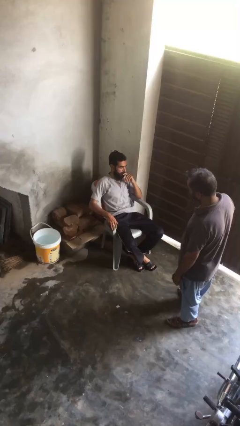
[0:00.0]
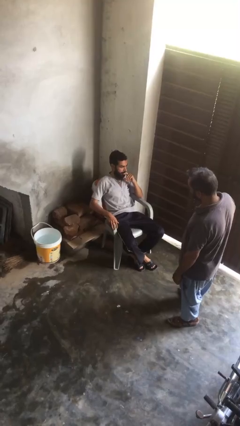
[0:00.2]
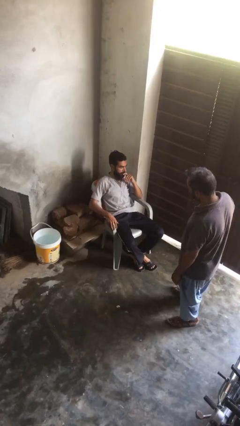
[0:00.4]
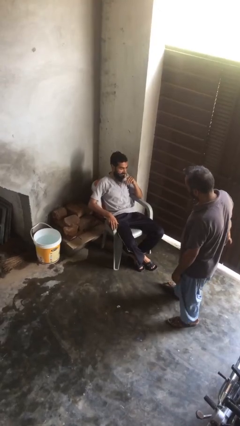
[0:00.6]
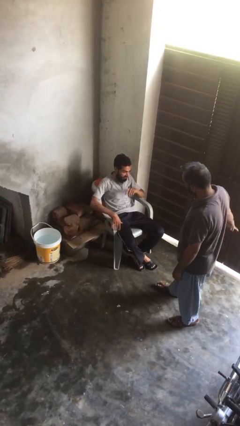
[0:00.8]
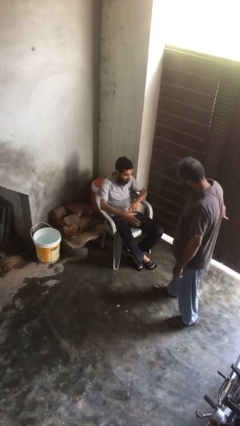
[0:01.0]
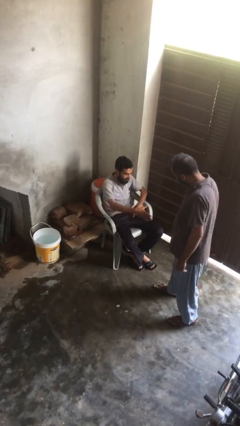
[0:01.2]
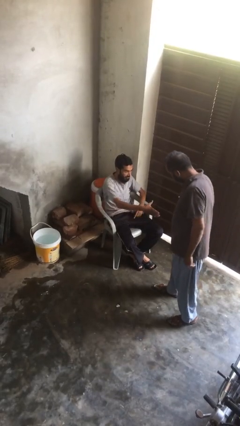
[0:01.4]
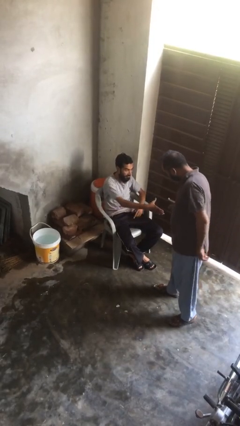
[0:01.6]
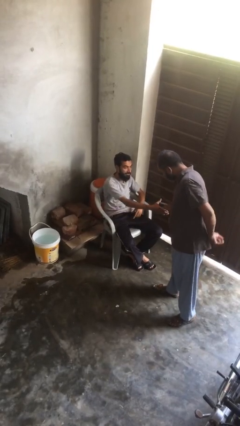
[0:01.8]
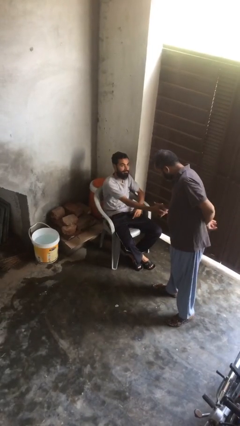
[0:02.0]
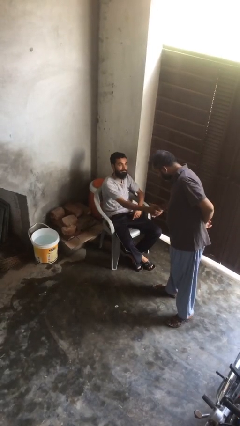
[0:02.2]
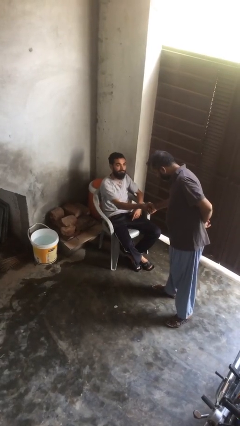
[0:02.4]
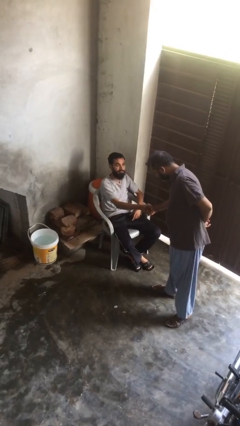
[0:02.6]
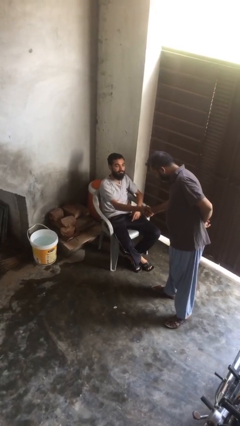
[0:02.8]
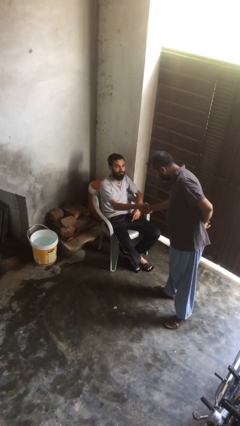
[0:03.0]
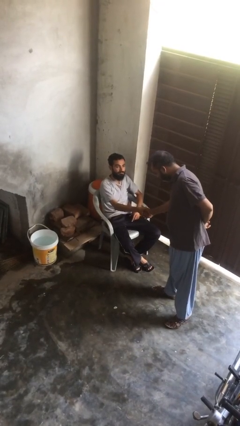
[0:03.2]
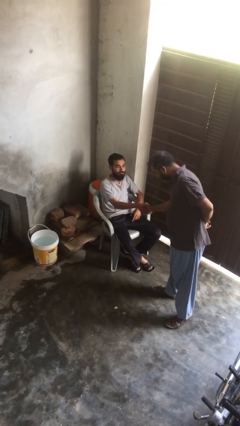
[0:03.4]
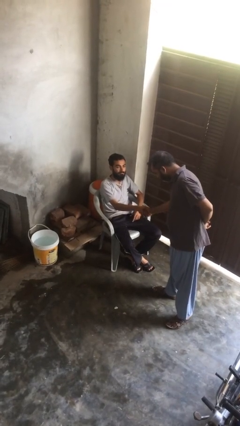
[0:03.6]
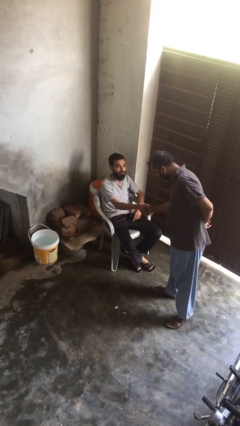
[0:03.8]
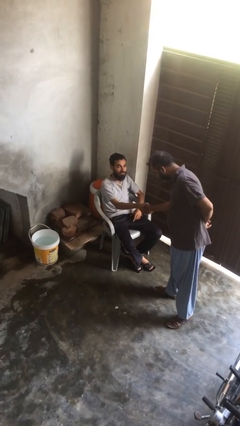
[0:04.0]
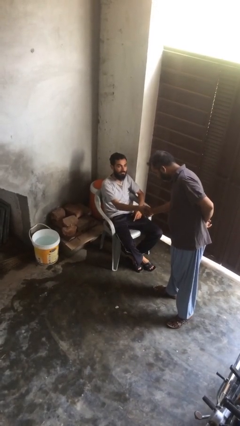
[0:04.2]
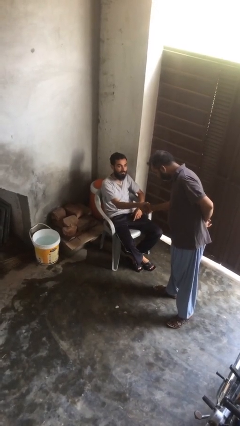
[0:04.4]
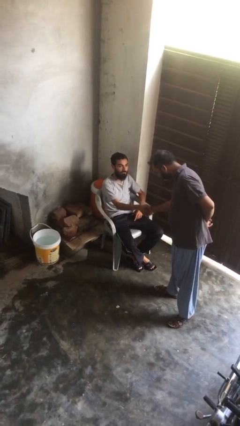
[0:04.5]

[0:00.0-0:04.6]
person shakes hand

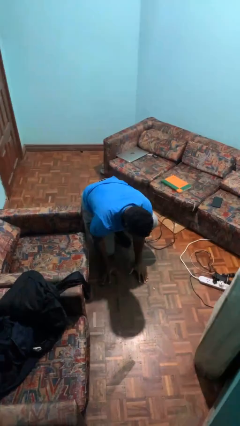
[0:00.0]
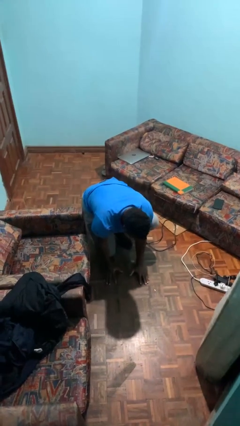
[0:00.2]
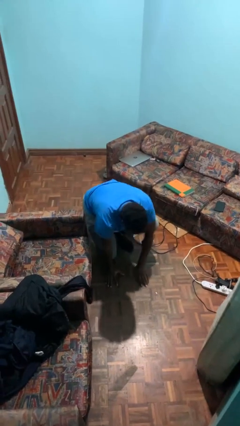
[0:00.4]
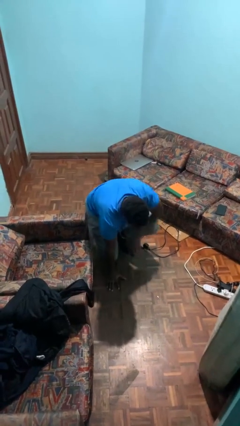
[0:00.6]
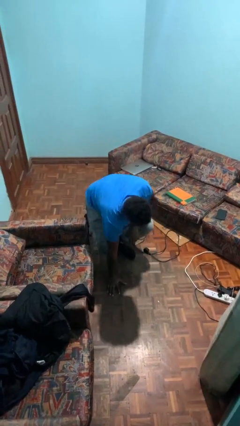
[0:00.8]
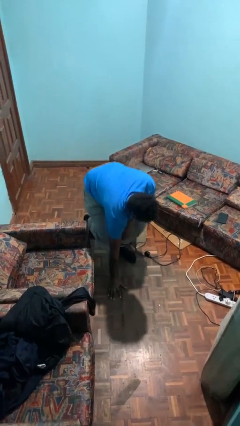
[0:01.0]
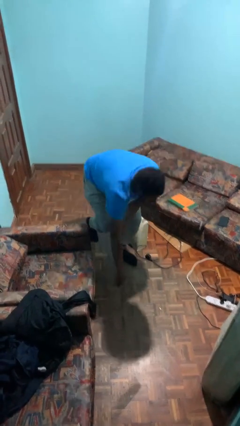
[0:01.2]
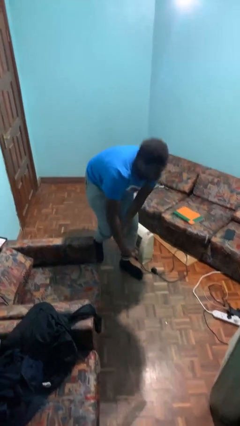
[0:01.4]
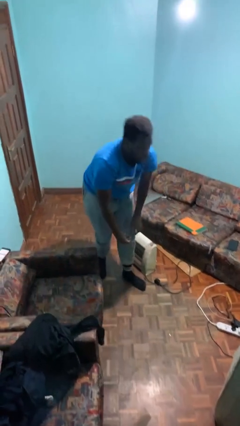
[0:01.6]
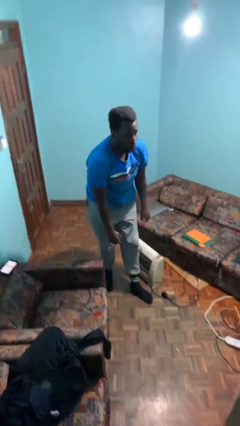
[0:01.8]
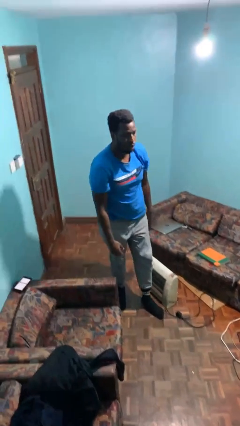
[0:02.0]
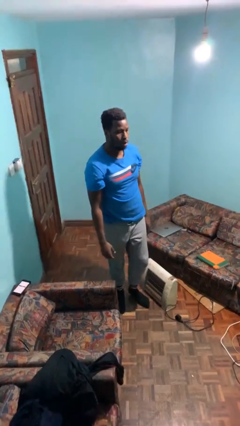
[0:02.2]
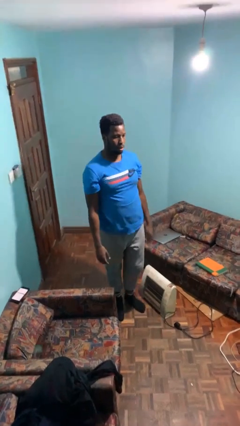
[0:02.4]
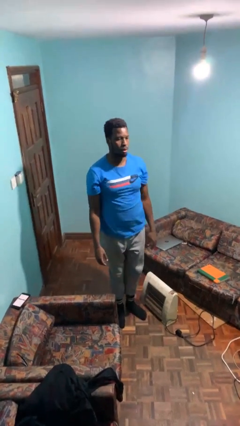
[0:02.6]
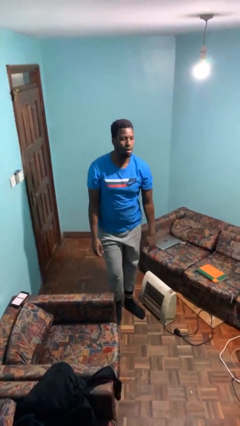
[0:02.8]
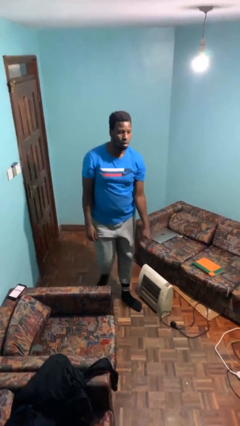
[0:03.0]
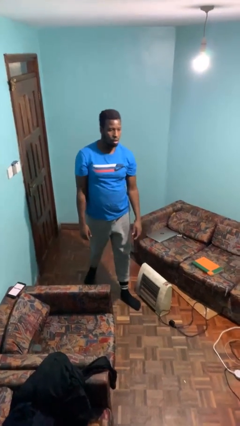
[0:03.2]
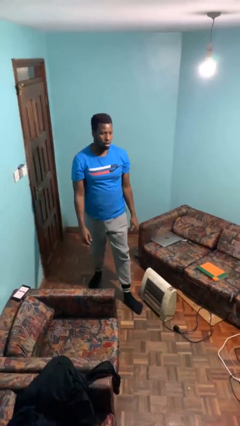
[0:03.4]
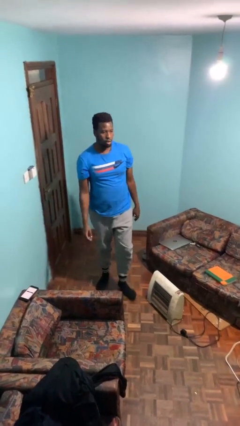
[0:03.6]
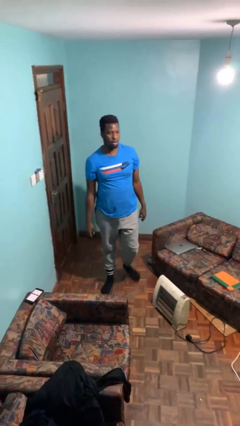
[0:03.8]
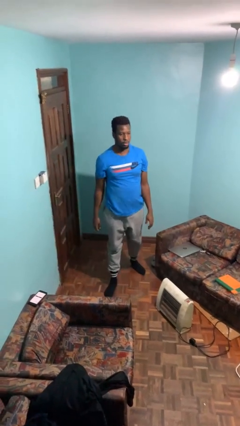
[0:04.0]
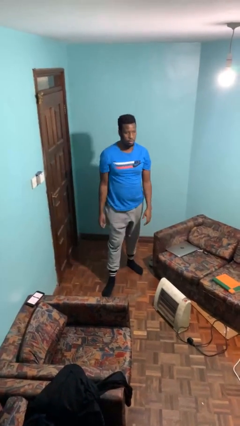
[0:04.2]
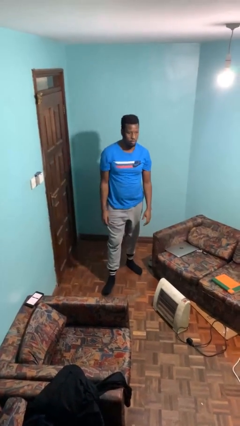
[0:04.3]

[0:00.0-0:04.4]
person stands up from floor

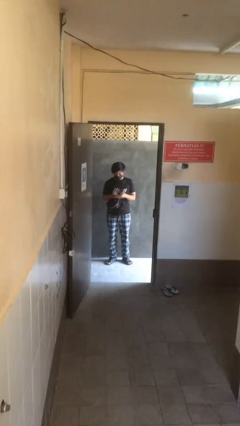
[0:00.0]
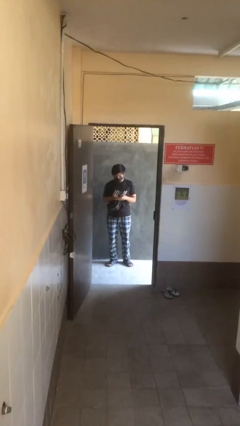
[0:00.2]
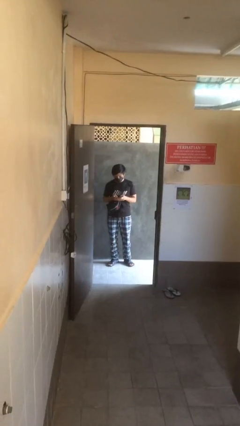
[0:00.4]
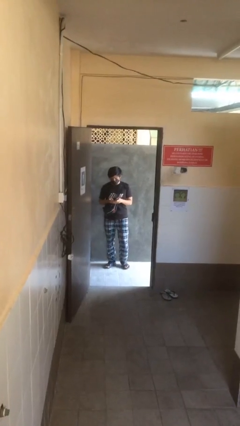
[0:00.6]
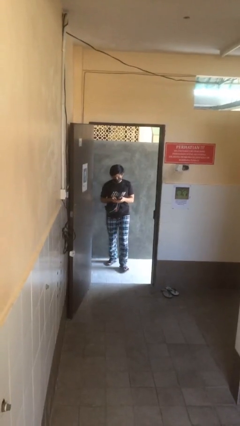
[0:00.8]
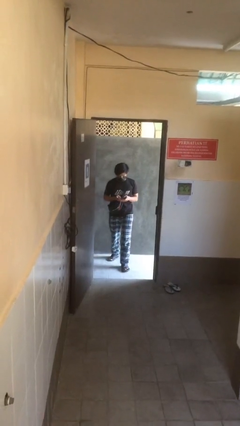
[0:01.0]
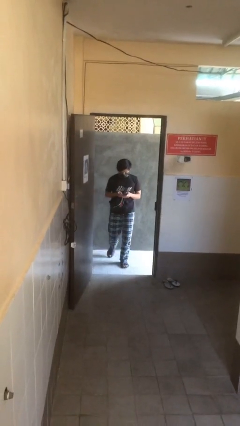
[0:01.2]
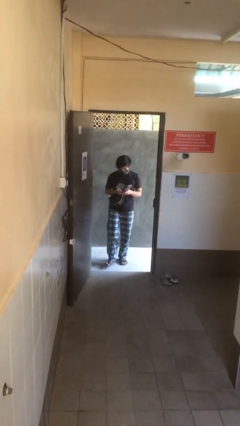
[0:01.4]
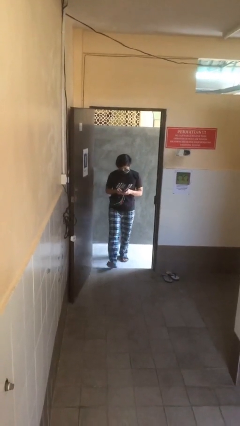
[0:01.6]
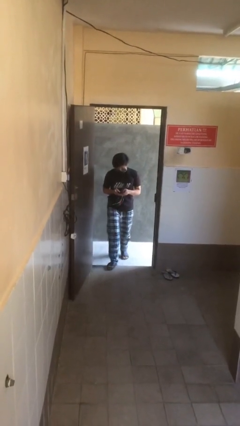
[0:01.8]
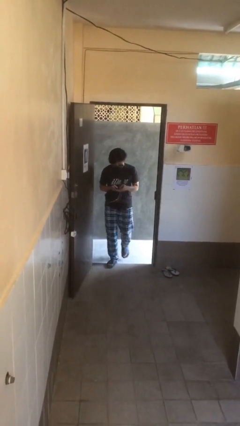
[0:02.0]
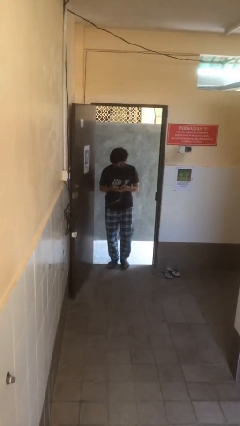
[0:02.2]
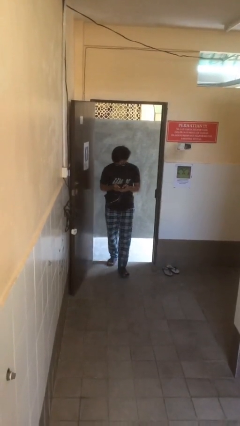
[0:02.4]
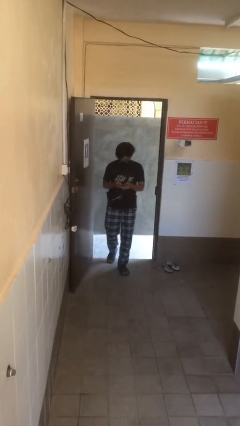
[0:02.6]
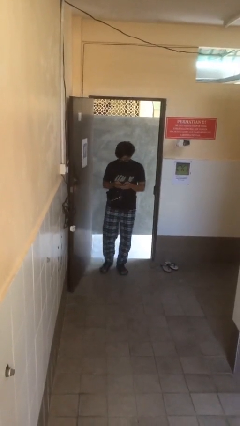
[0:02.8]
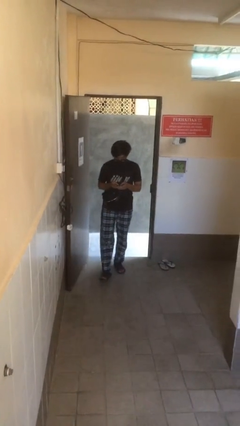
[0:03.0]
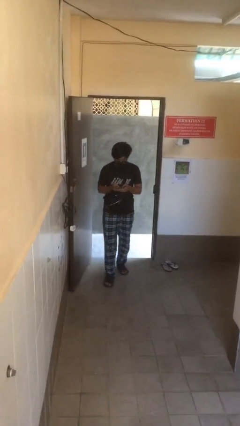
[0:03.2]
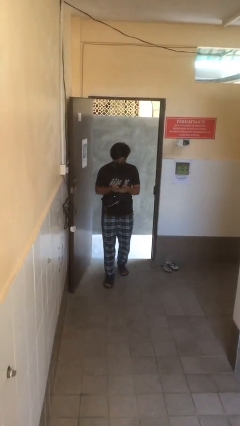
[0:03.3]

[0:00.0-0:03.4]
person enters scene through structure

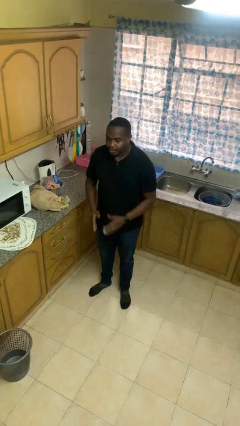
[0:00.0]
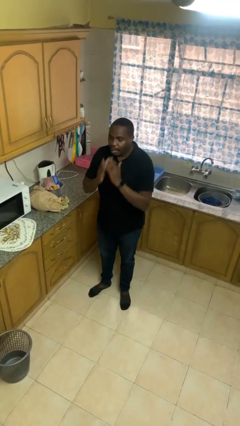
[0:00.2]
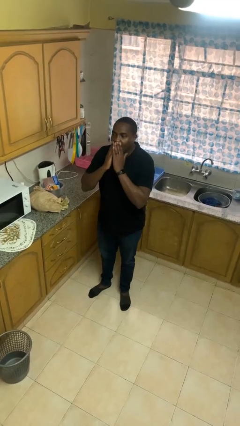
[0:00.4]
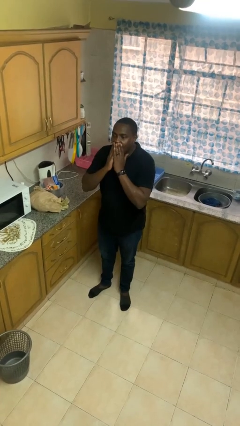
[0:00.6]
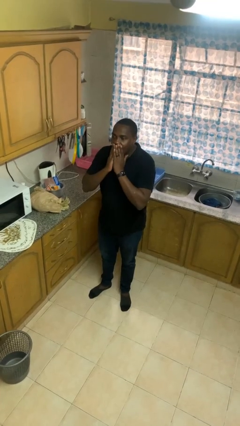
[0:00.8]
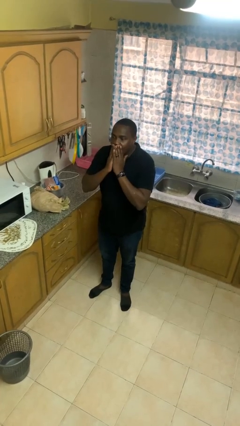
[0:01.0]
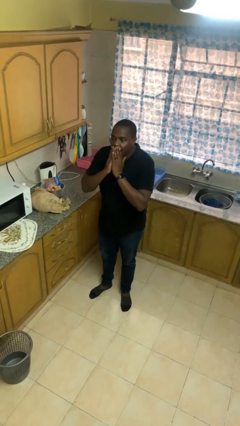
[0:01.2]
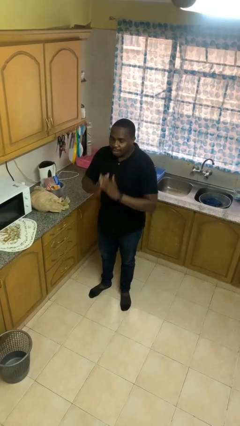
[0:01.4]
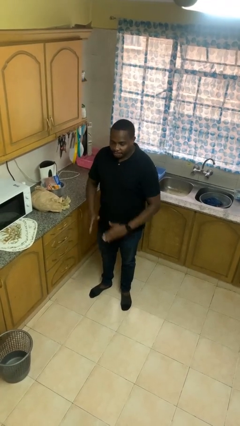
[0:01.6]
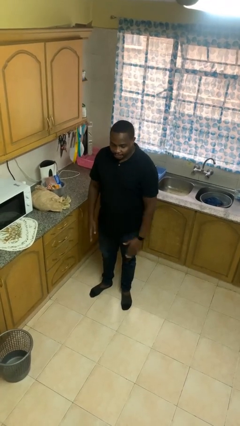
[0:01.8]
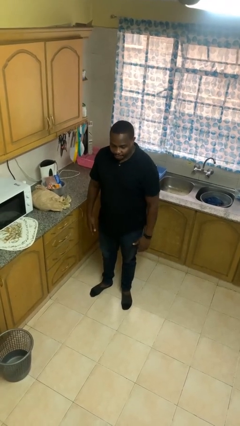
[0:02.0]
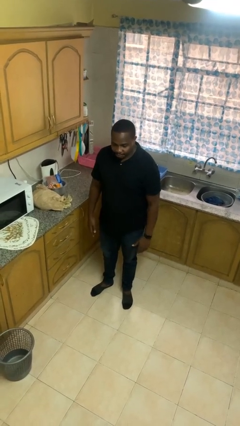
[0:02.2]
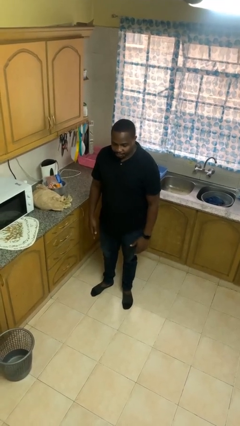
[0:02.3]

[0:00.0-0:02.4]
person yawns

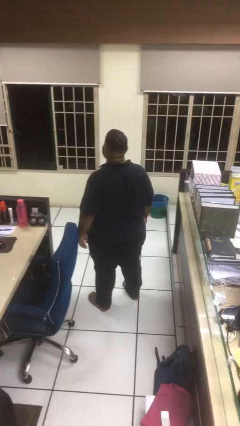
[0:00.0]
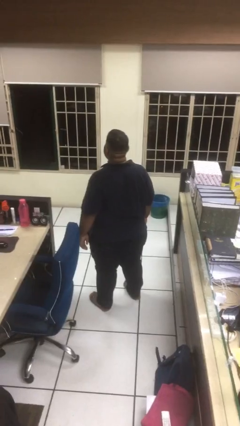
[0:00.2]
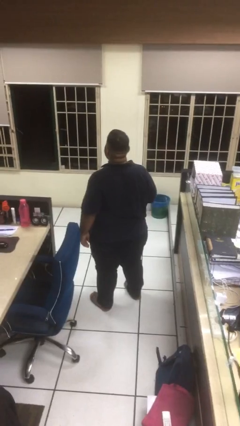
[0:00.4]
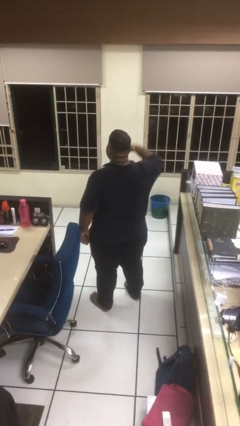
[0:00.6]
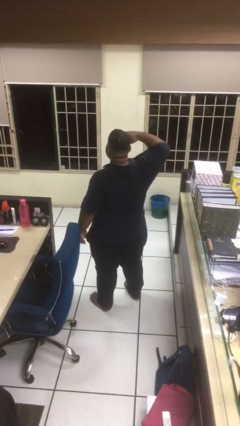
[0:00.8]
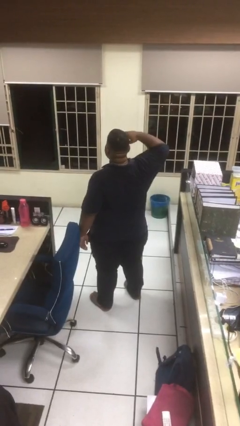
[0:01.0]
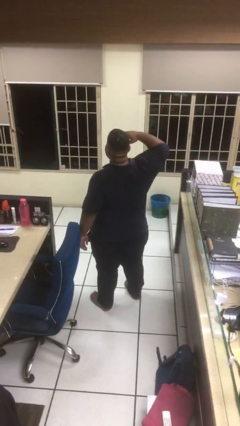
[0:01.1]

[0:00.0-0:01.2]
person salutes

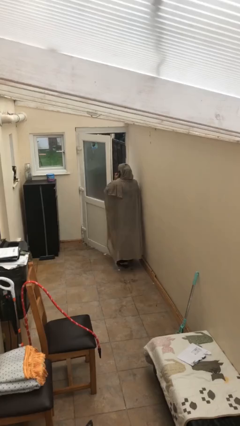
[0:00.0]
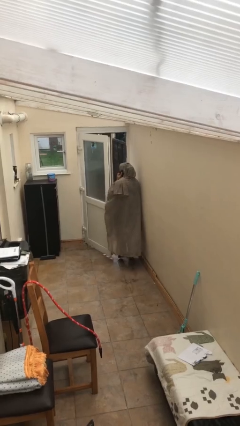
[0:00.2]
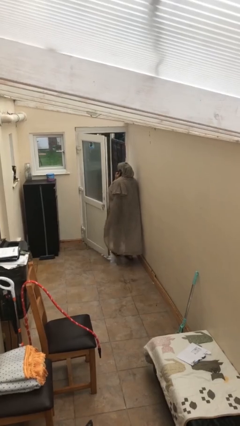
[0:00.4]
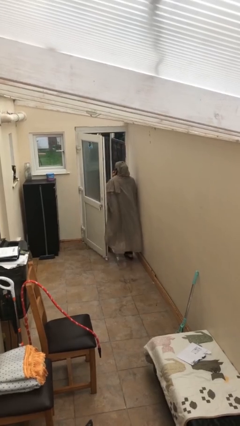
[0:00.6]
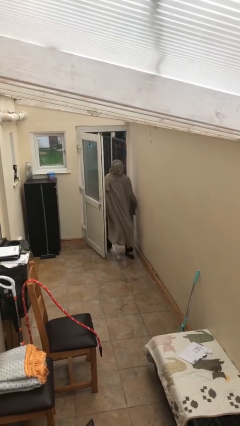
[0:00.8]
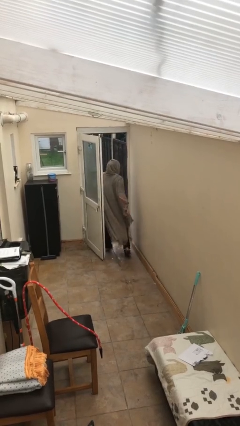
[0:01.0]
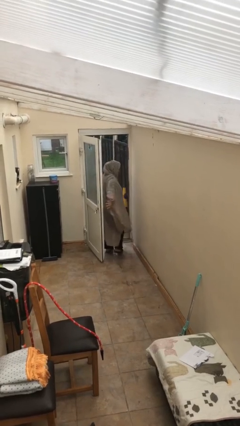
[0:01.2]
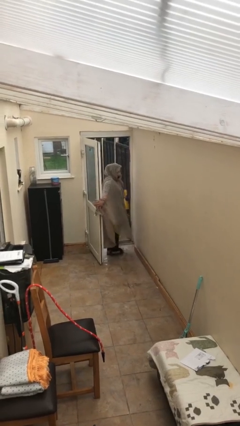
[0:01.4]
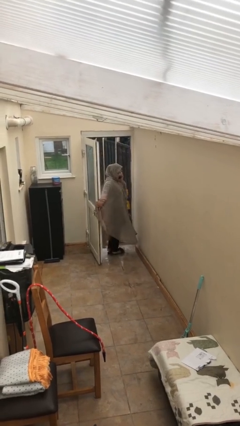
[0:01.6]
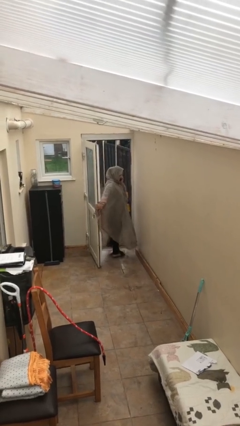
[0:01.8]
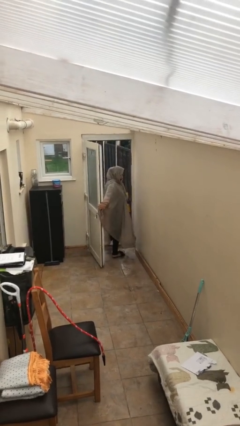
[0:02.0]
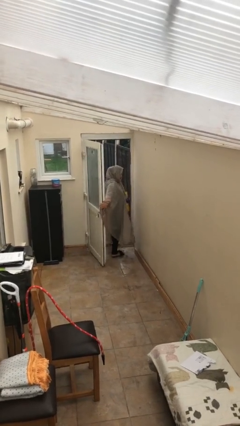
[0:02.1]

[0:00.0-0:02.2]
person exits scene through structure
